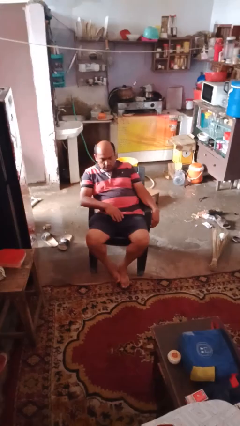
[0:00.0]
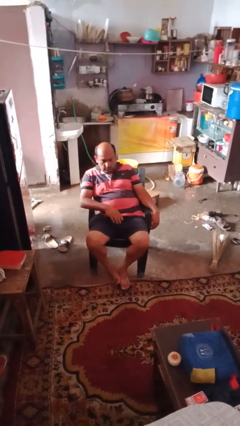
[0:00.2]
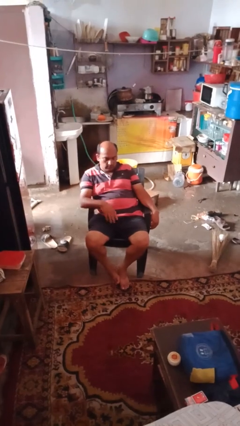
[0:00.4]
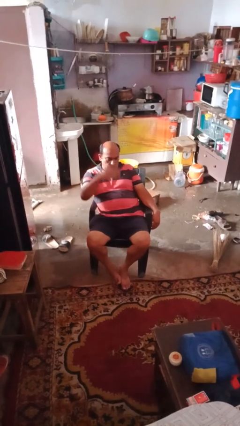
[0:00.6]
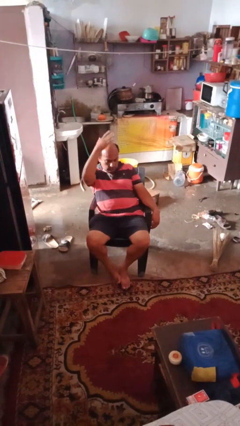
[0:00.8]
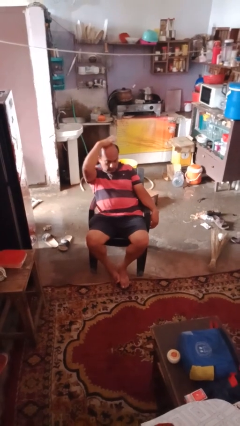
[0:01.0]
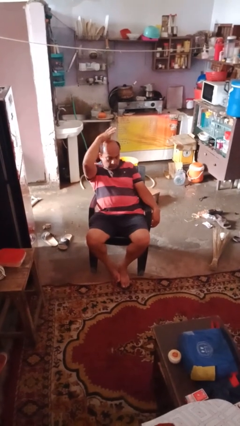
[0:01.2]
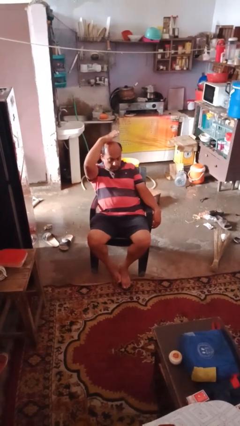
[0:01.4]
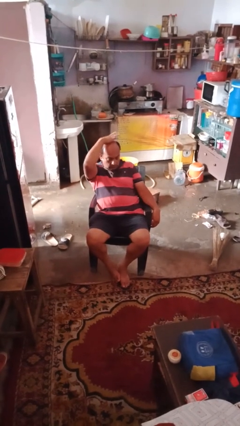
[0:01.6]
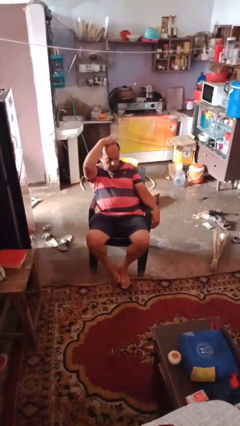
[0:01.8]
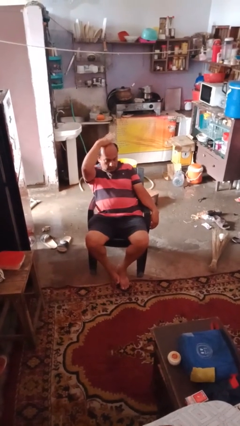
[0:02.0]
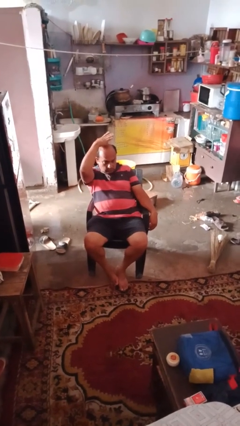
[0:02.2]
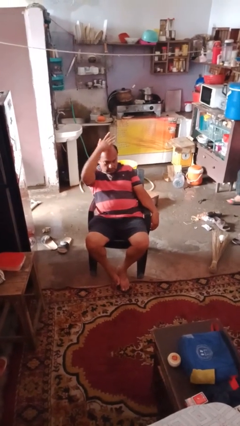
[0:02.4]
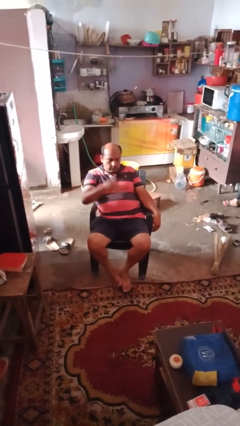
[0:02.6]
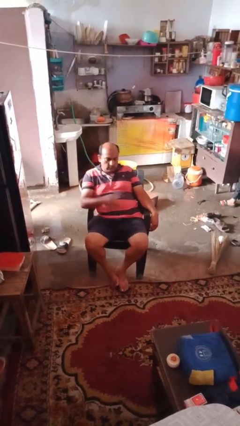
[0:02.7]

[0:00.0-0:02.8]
person pats head

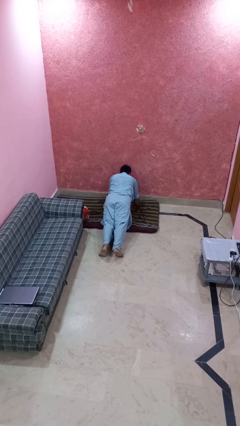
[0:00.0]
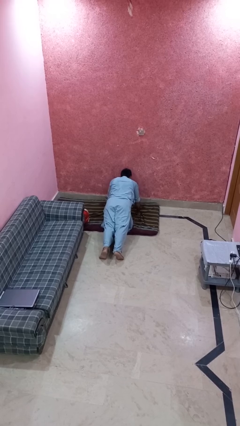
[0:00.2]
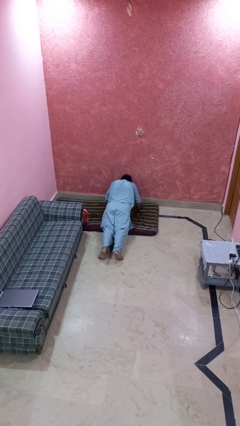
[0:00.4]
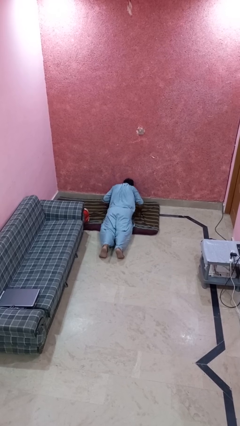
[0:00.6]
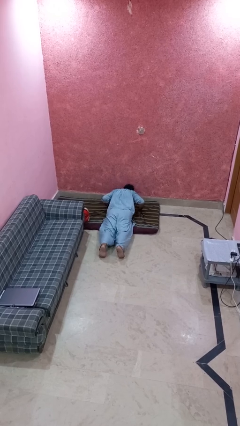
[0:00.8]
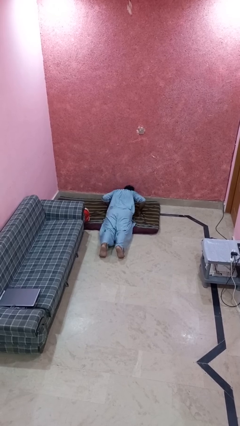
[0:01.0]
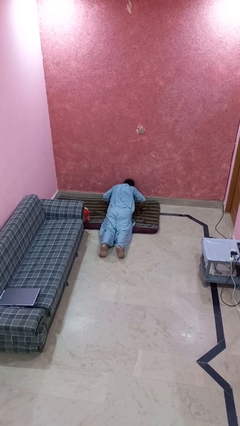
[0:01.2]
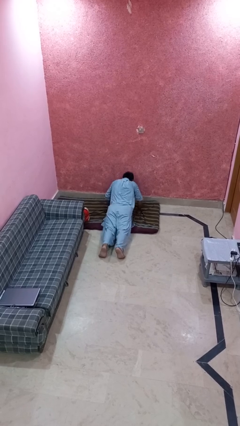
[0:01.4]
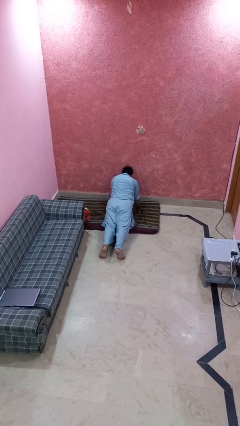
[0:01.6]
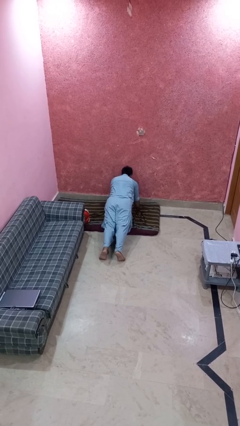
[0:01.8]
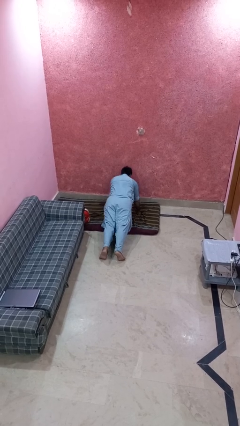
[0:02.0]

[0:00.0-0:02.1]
person exercises with pushup

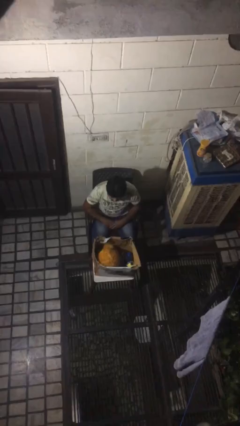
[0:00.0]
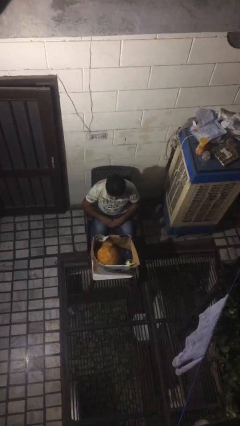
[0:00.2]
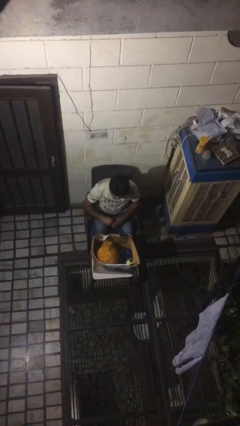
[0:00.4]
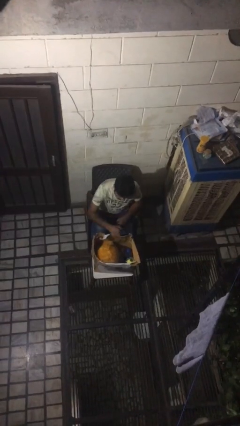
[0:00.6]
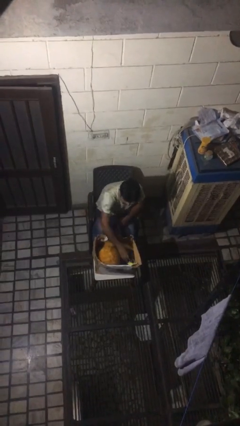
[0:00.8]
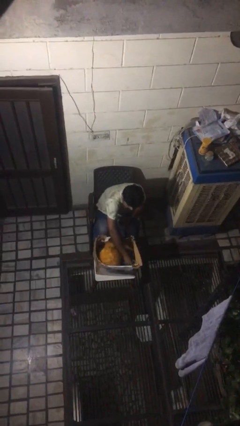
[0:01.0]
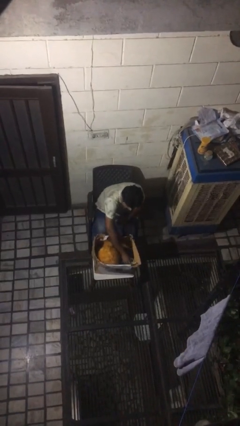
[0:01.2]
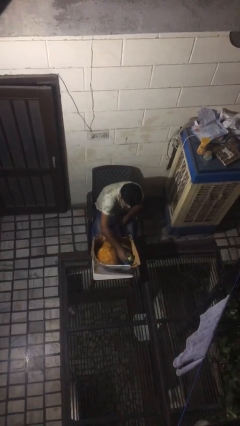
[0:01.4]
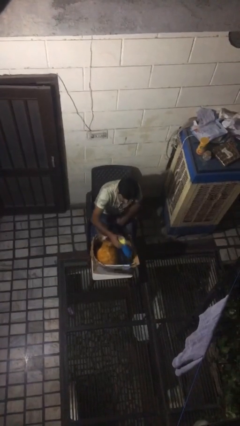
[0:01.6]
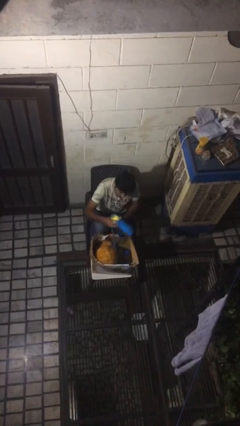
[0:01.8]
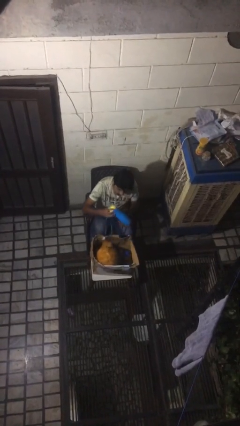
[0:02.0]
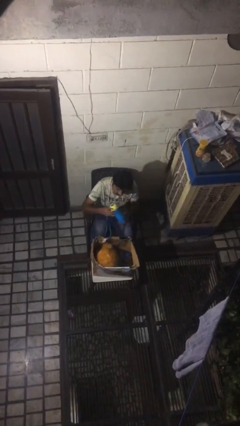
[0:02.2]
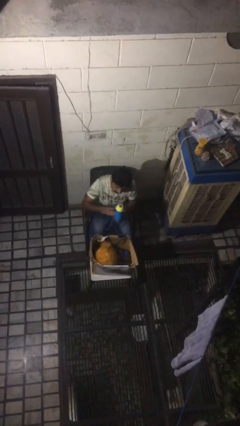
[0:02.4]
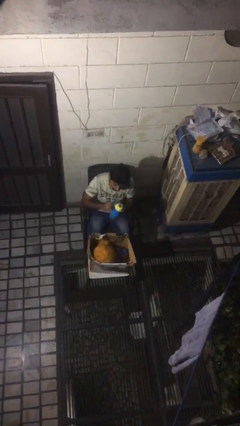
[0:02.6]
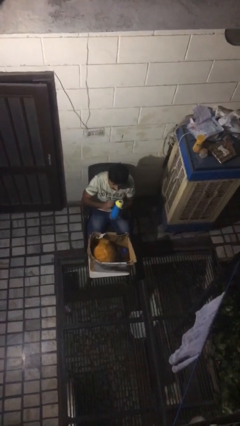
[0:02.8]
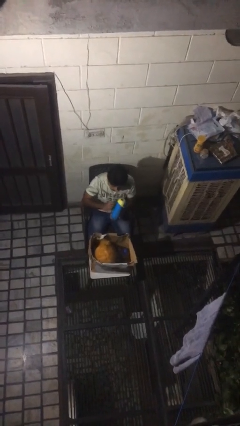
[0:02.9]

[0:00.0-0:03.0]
person takes object from box

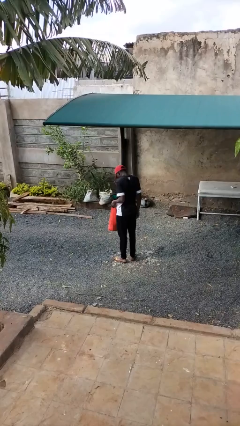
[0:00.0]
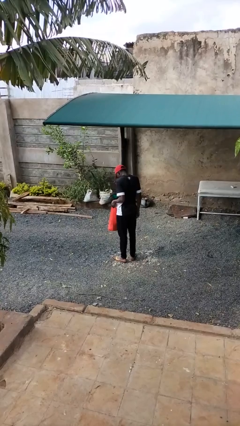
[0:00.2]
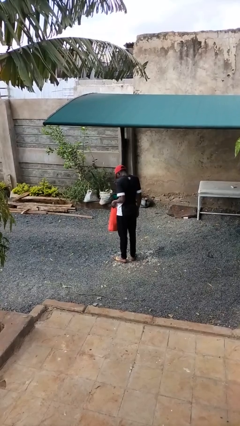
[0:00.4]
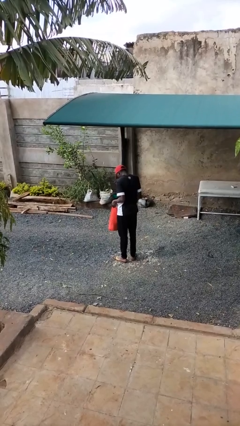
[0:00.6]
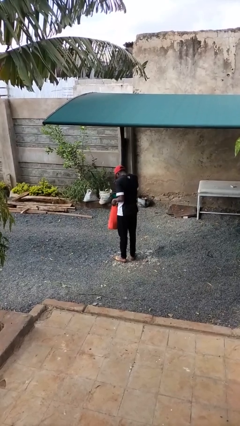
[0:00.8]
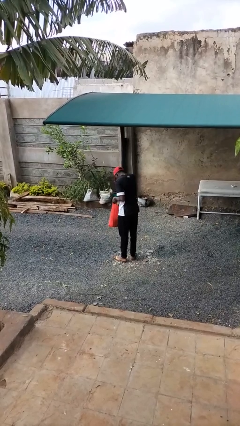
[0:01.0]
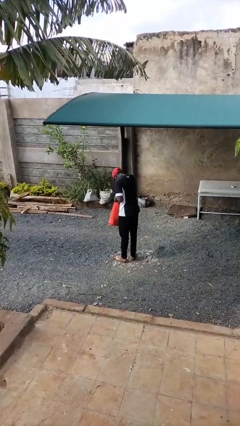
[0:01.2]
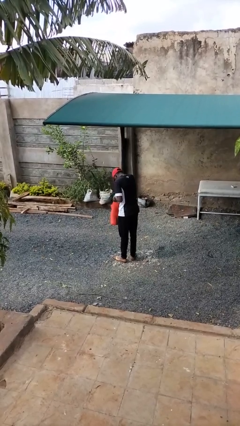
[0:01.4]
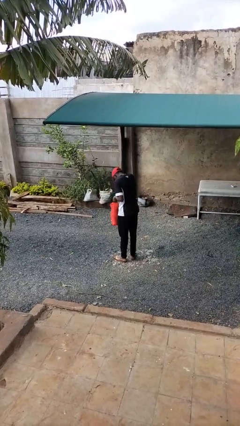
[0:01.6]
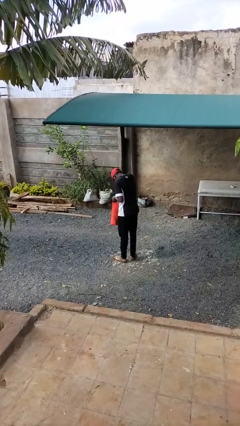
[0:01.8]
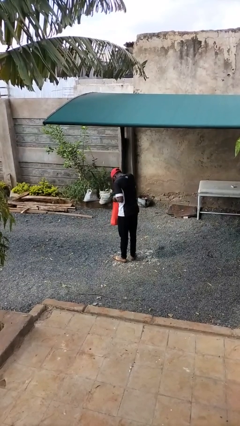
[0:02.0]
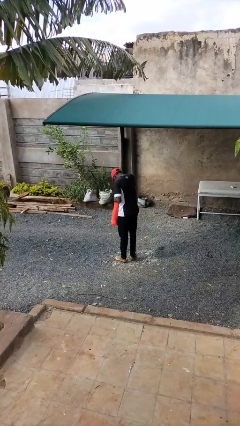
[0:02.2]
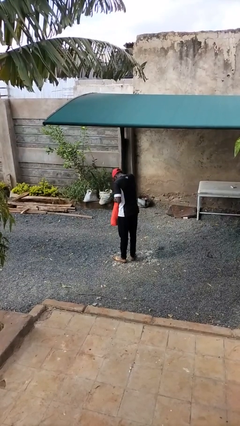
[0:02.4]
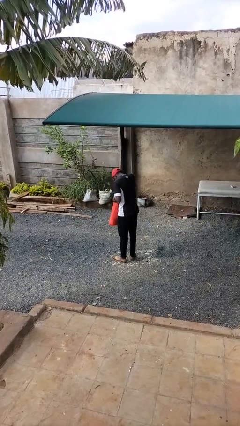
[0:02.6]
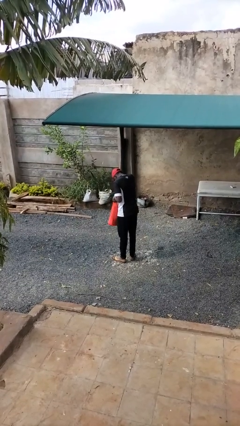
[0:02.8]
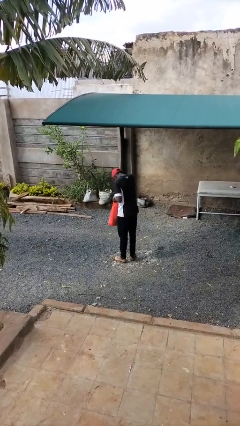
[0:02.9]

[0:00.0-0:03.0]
person searches in bag

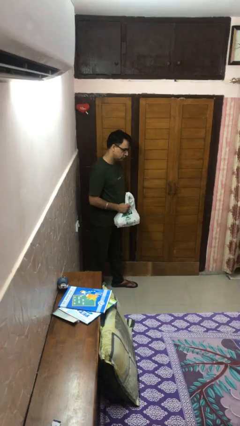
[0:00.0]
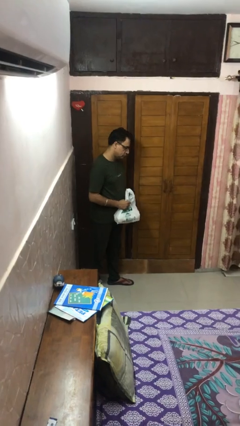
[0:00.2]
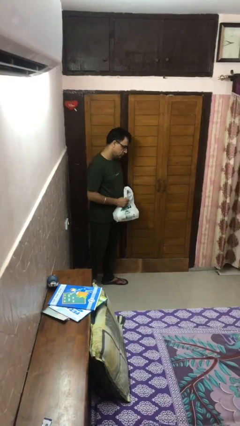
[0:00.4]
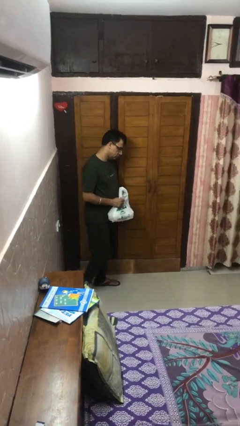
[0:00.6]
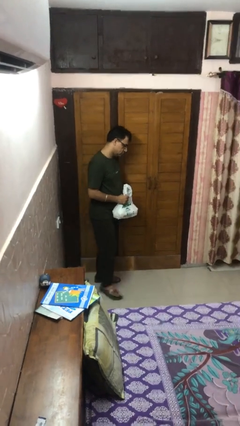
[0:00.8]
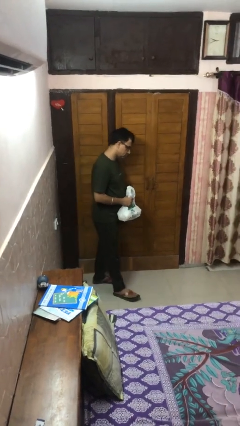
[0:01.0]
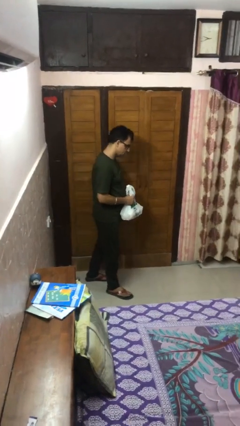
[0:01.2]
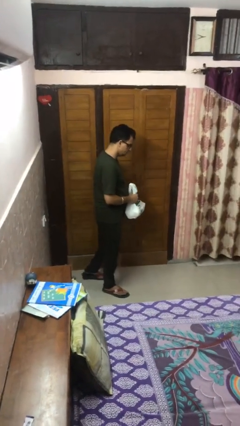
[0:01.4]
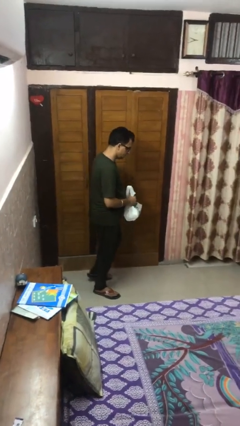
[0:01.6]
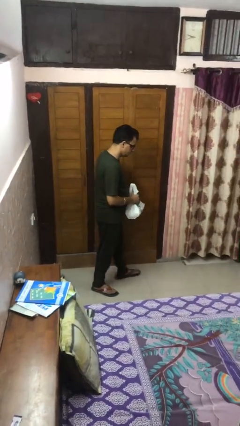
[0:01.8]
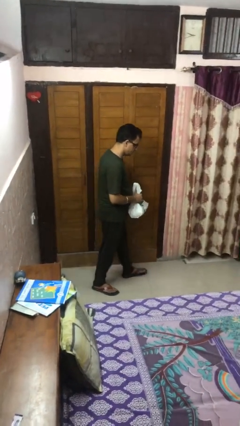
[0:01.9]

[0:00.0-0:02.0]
person carries groceries

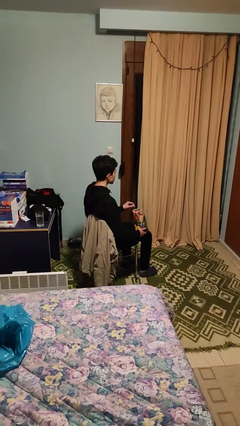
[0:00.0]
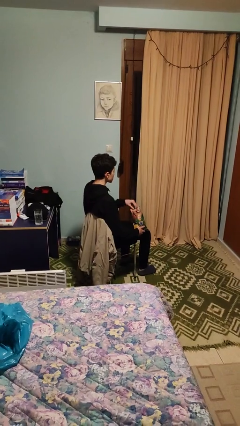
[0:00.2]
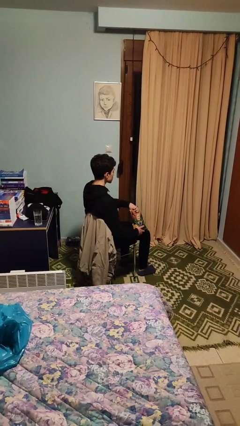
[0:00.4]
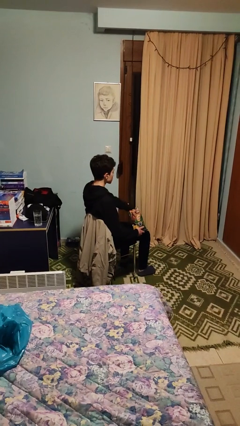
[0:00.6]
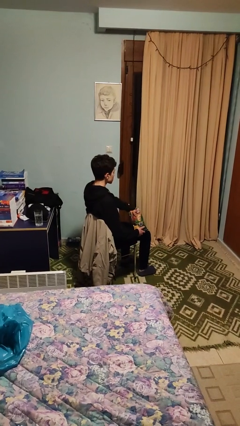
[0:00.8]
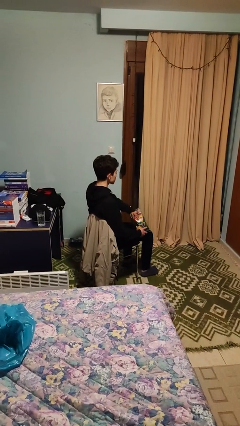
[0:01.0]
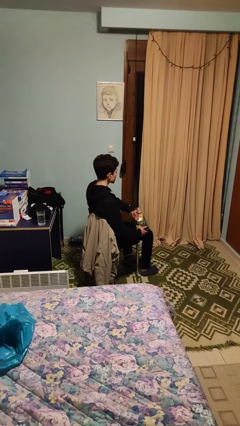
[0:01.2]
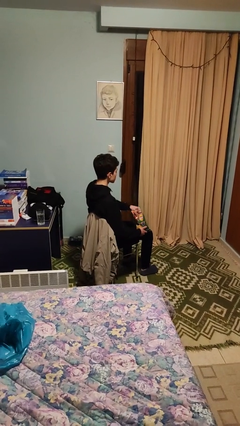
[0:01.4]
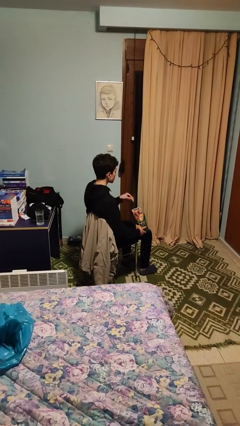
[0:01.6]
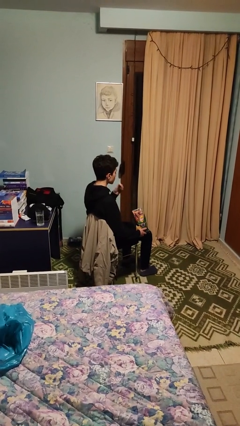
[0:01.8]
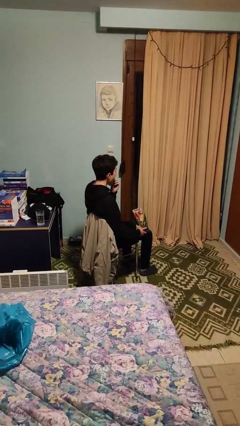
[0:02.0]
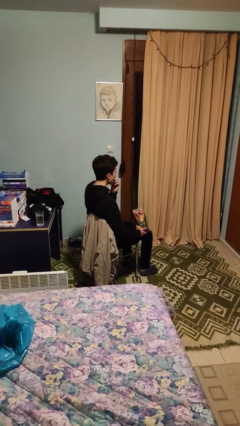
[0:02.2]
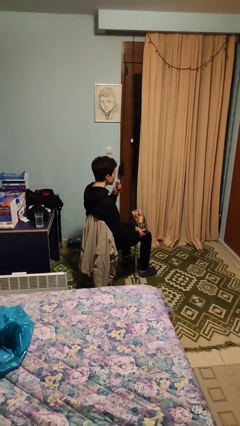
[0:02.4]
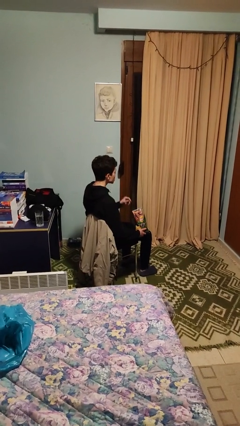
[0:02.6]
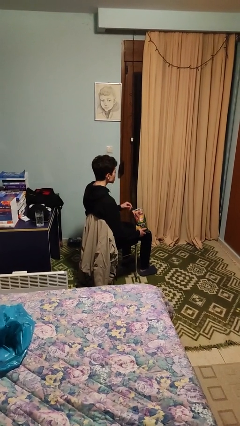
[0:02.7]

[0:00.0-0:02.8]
person eats snack from bag

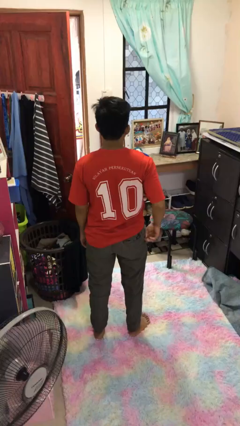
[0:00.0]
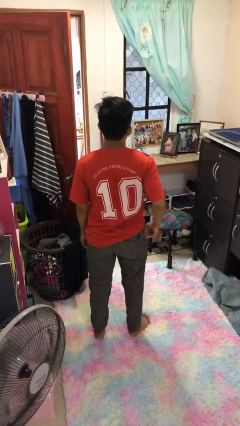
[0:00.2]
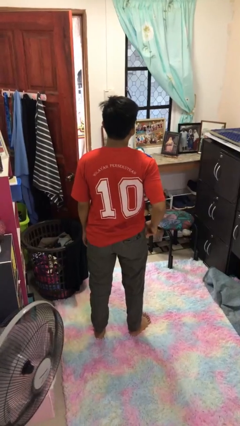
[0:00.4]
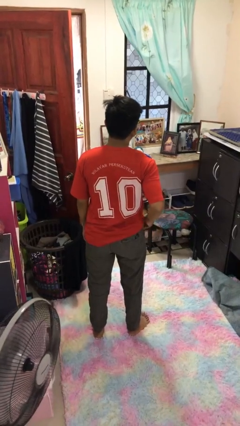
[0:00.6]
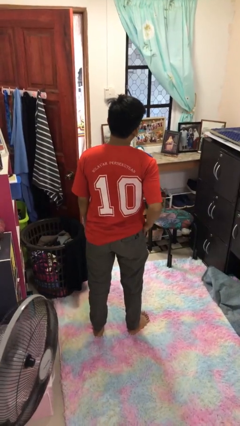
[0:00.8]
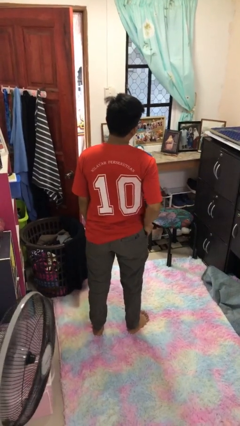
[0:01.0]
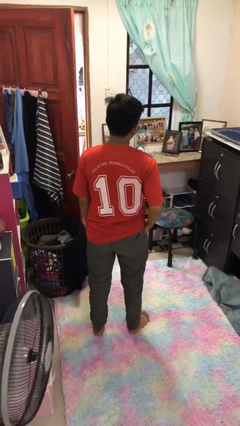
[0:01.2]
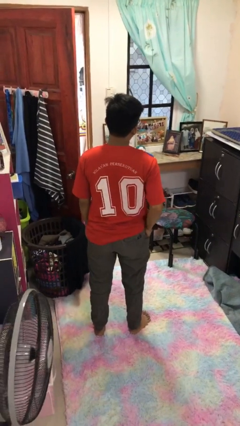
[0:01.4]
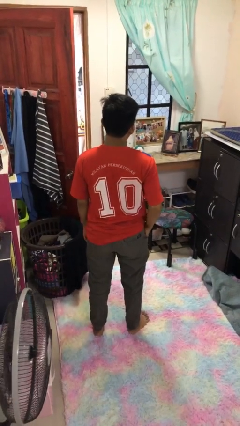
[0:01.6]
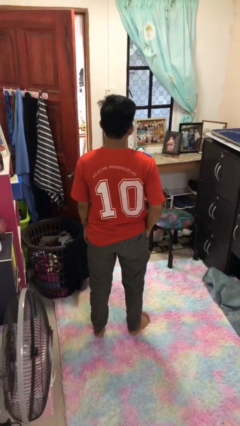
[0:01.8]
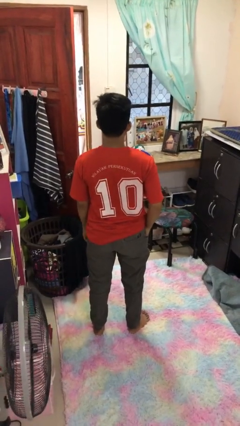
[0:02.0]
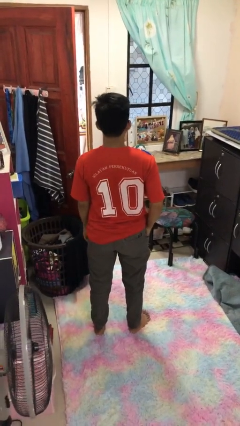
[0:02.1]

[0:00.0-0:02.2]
person puts hands in back pockets
